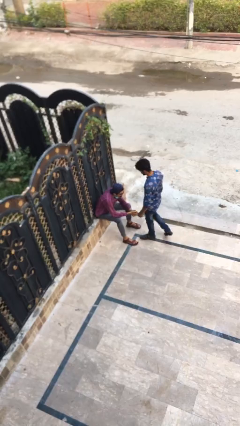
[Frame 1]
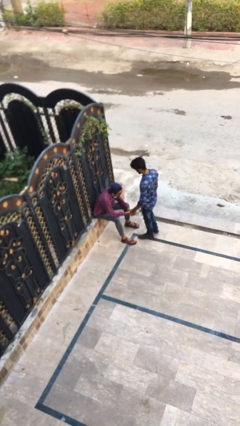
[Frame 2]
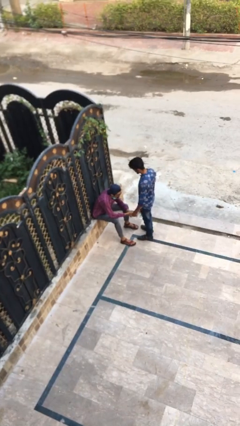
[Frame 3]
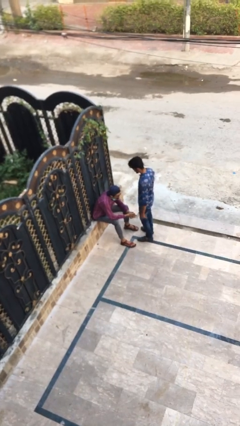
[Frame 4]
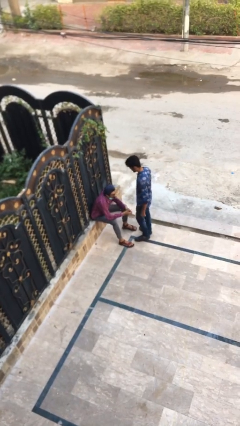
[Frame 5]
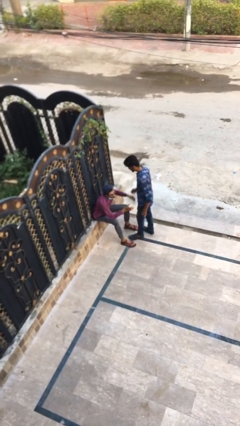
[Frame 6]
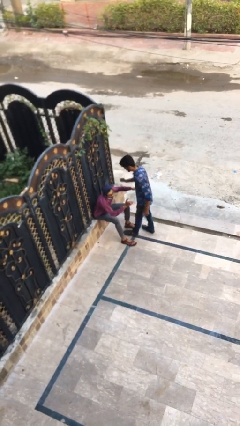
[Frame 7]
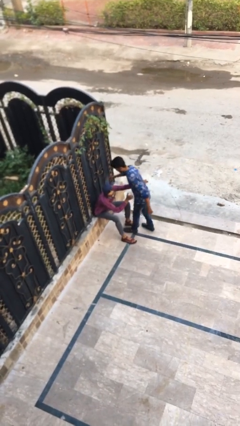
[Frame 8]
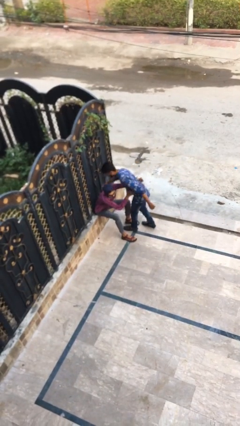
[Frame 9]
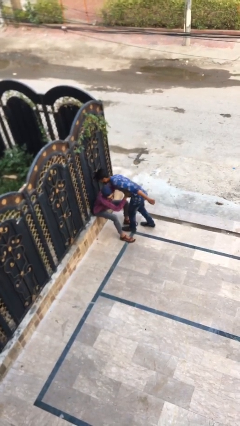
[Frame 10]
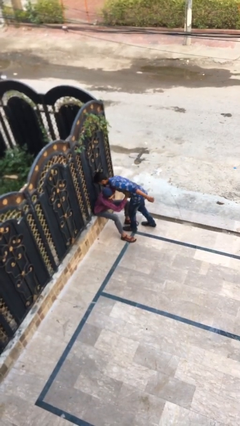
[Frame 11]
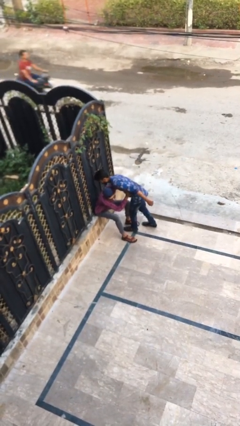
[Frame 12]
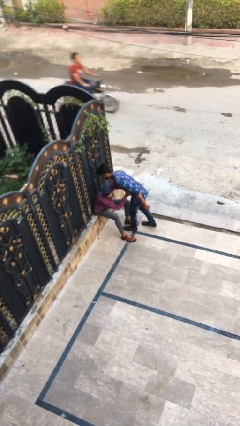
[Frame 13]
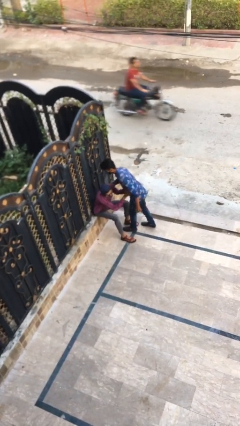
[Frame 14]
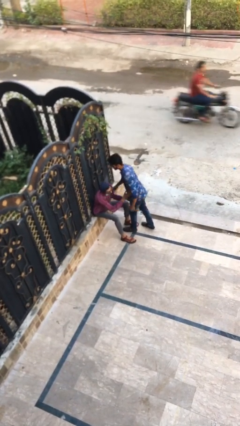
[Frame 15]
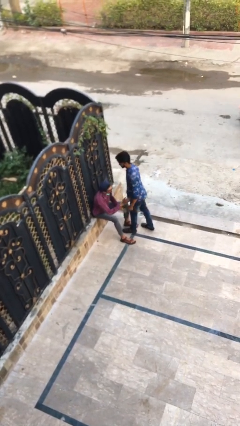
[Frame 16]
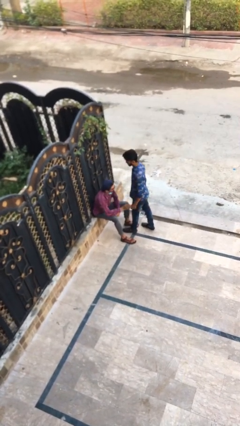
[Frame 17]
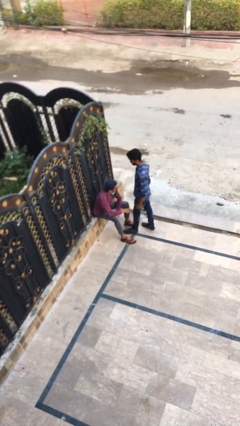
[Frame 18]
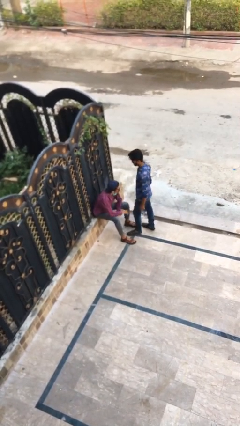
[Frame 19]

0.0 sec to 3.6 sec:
person embraces person

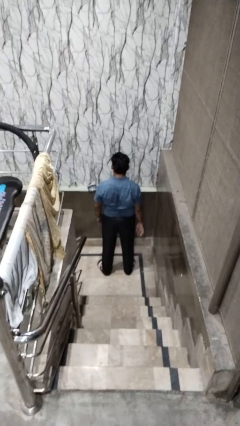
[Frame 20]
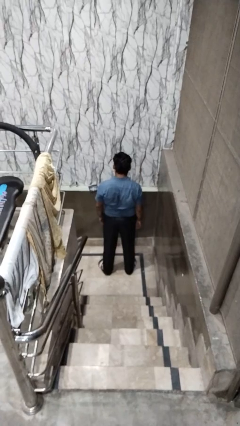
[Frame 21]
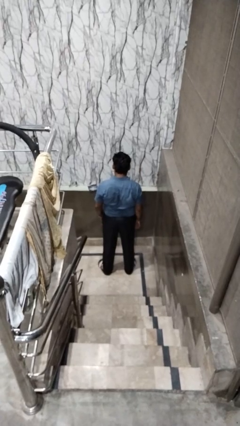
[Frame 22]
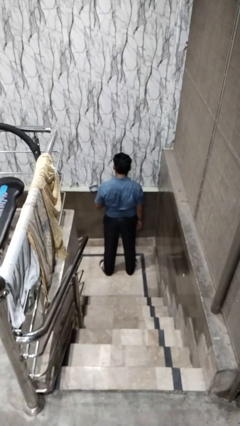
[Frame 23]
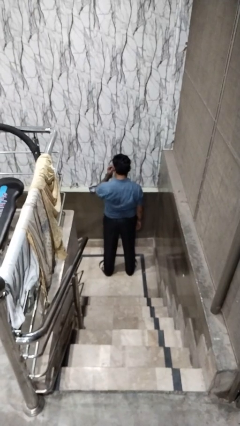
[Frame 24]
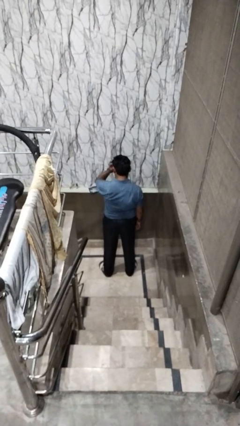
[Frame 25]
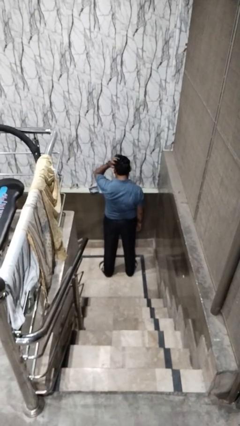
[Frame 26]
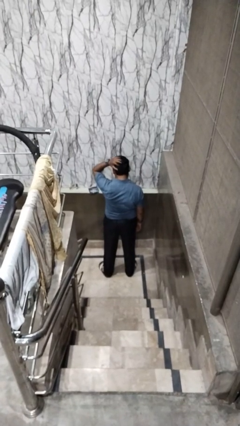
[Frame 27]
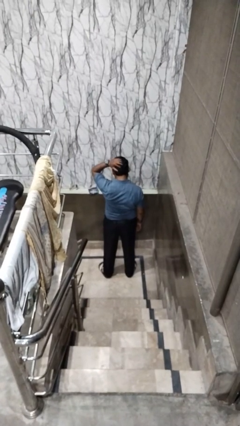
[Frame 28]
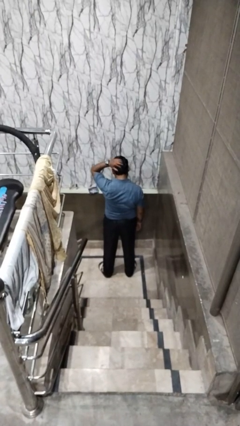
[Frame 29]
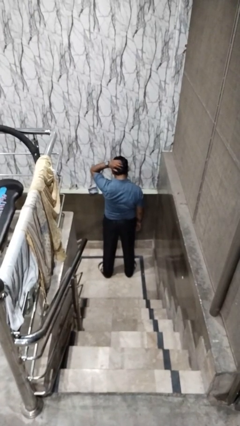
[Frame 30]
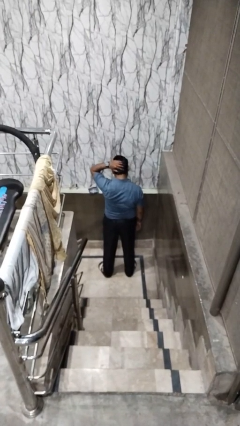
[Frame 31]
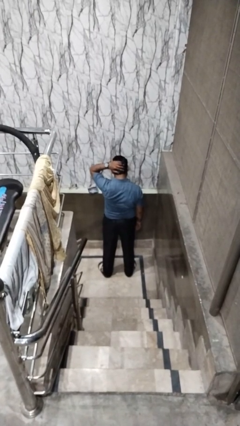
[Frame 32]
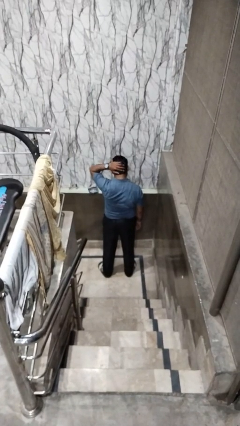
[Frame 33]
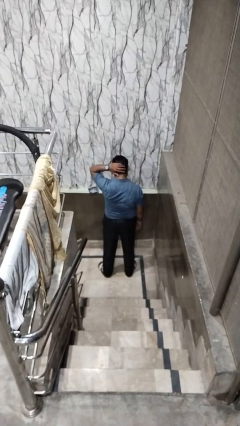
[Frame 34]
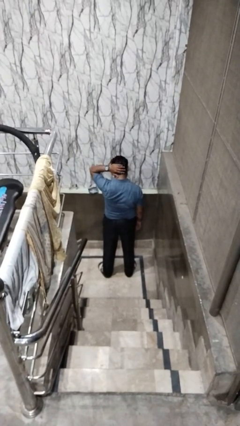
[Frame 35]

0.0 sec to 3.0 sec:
person strokes hair

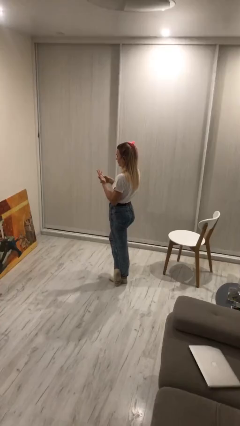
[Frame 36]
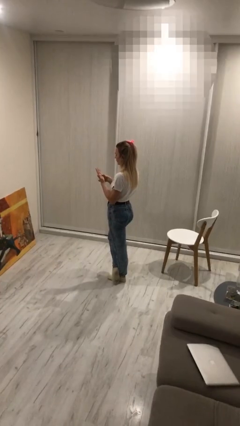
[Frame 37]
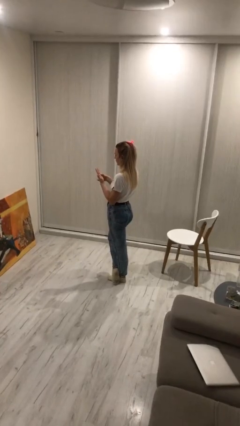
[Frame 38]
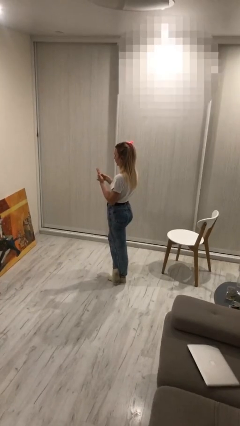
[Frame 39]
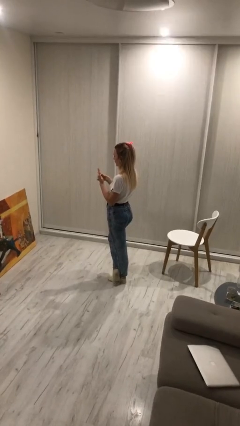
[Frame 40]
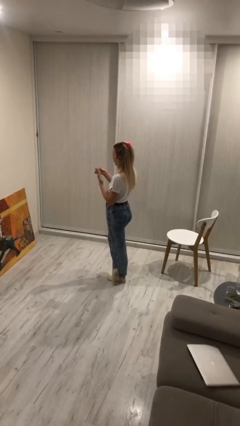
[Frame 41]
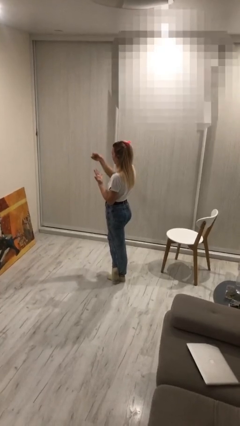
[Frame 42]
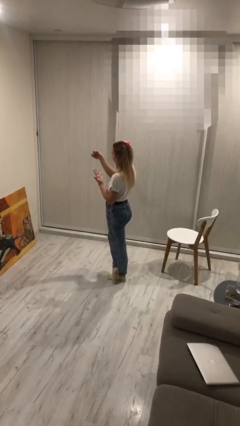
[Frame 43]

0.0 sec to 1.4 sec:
person takes off ring

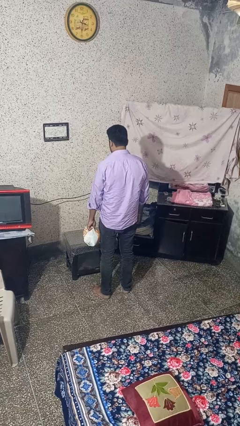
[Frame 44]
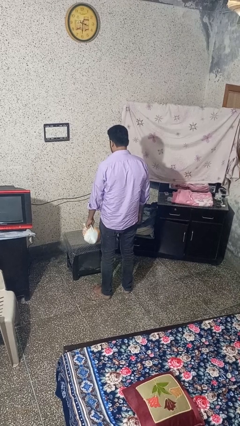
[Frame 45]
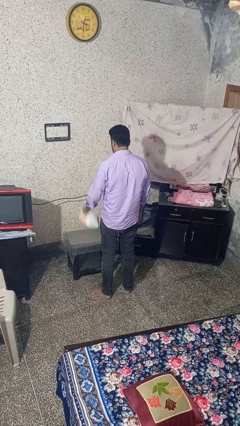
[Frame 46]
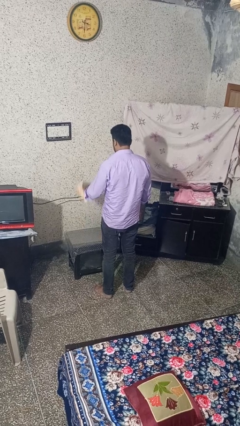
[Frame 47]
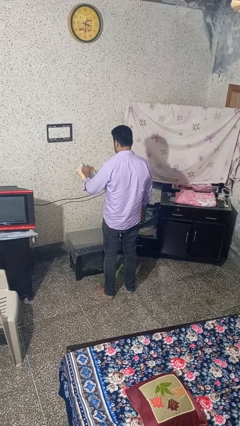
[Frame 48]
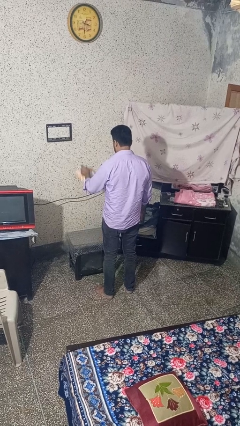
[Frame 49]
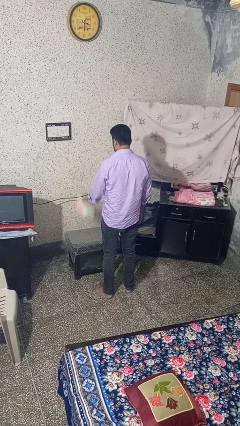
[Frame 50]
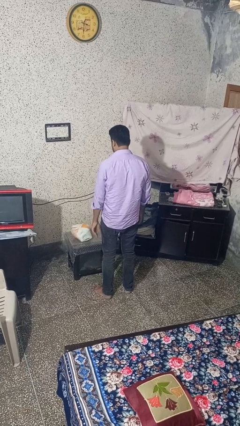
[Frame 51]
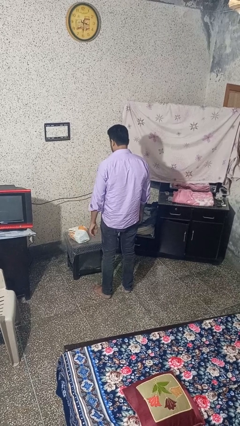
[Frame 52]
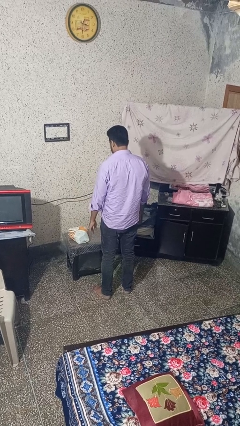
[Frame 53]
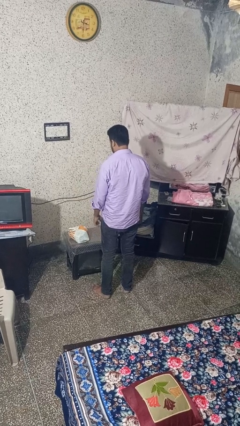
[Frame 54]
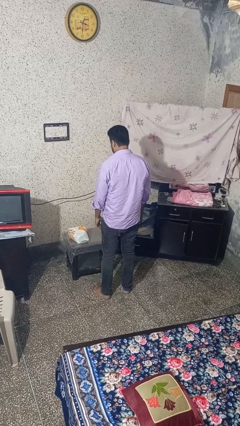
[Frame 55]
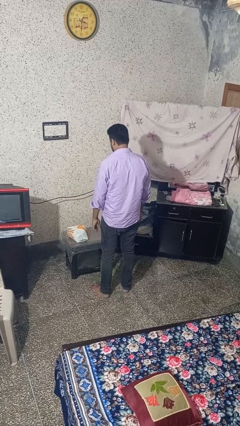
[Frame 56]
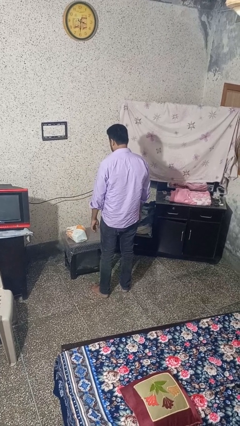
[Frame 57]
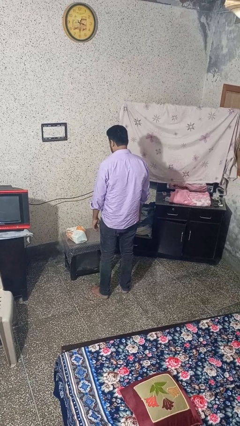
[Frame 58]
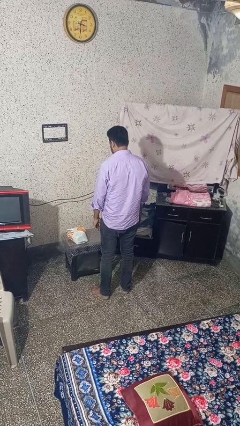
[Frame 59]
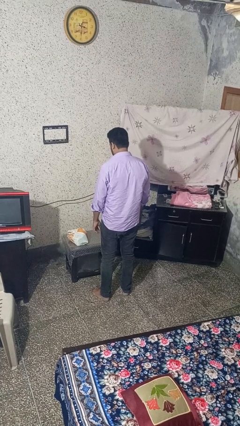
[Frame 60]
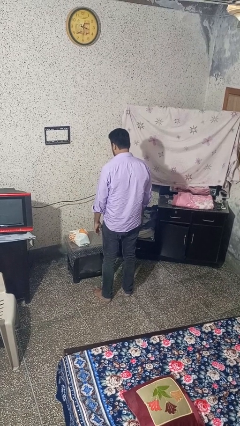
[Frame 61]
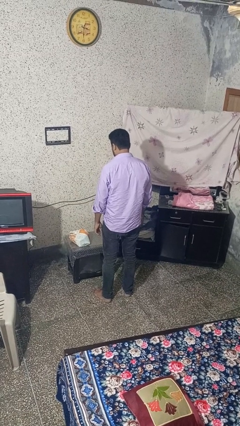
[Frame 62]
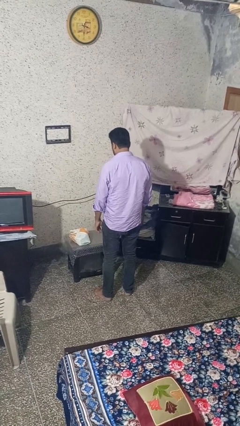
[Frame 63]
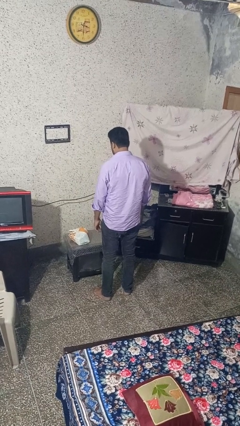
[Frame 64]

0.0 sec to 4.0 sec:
person throws object on table

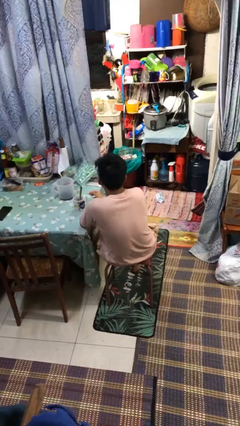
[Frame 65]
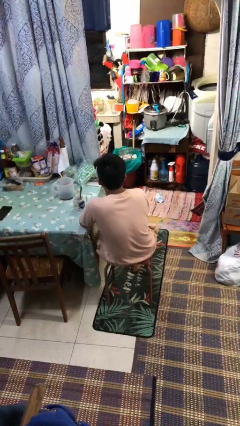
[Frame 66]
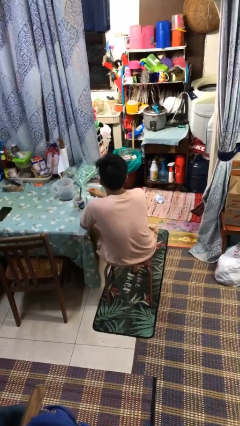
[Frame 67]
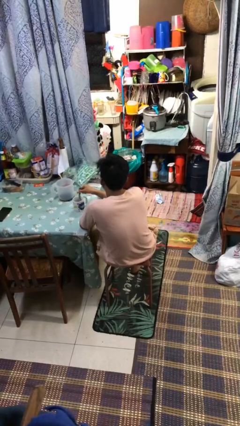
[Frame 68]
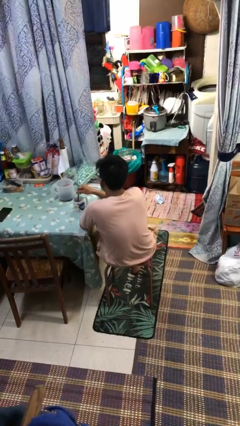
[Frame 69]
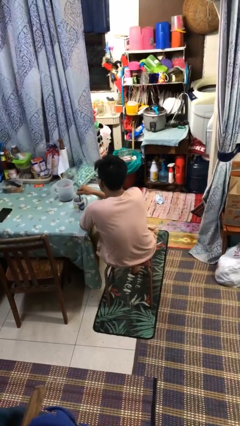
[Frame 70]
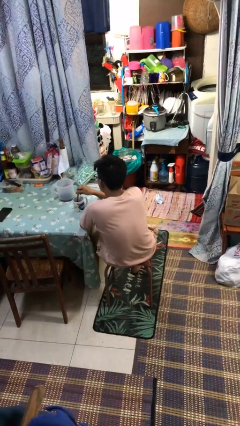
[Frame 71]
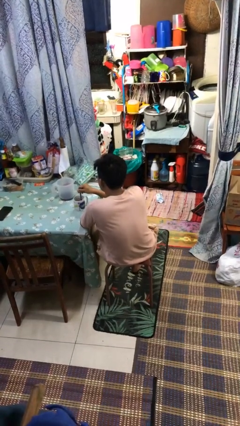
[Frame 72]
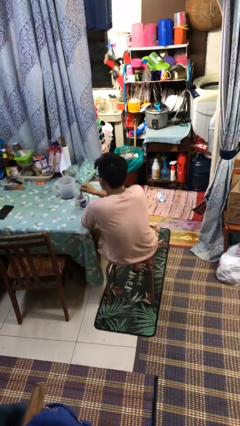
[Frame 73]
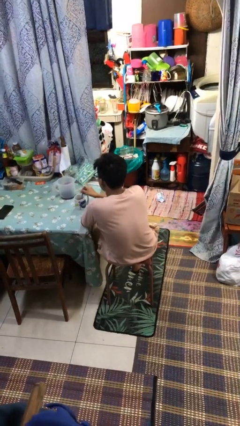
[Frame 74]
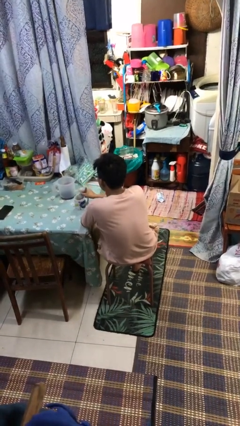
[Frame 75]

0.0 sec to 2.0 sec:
person stirs mug

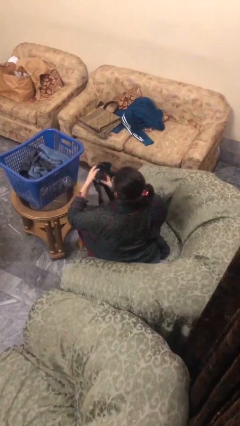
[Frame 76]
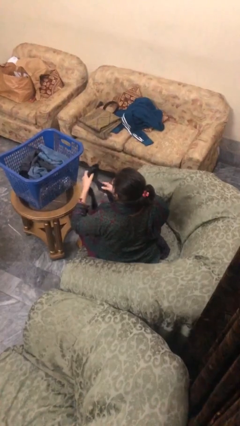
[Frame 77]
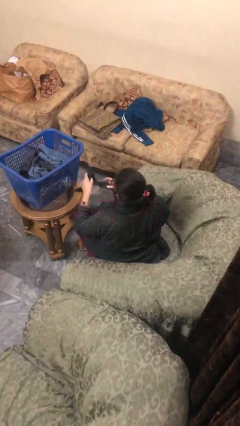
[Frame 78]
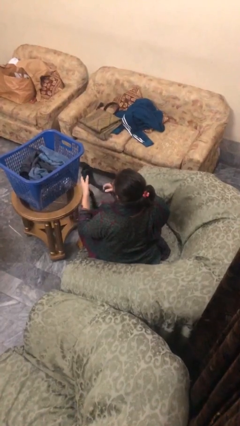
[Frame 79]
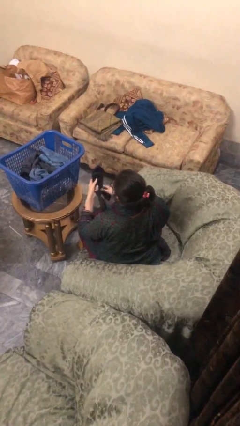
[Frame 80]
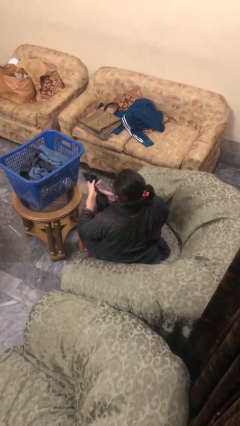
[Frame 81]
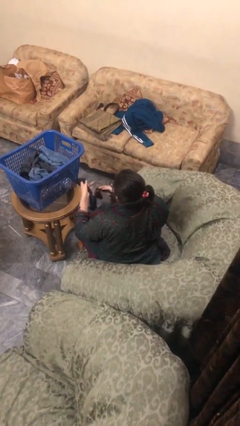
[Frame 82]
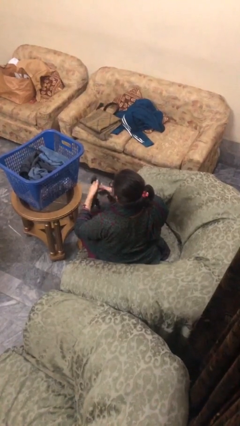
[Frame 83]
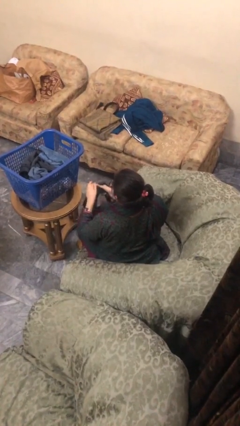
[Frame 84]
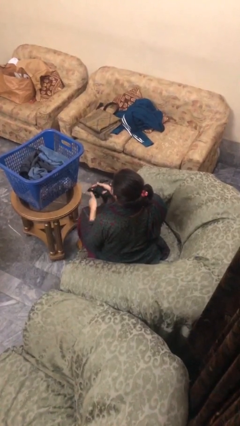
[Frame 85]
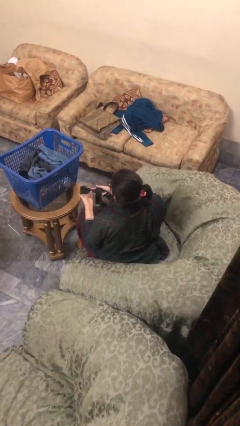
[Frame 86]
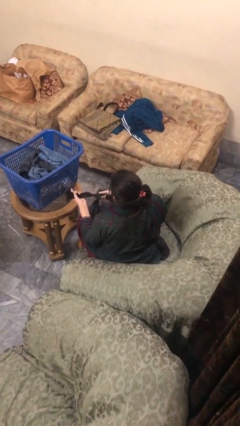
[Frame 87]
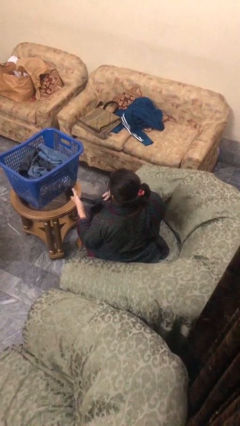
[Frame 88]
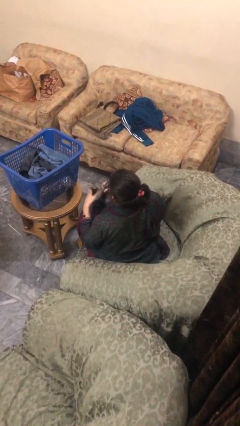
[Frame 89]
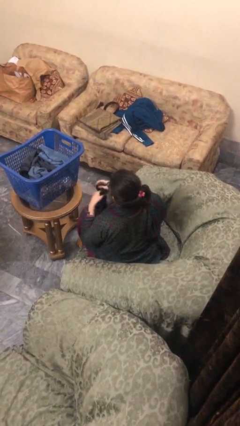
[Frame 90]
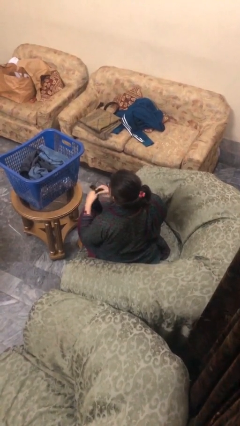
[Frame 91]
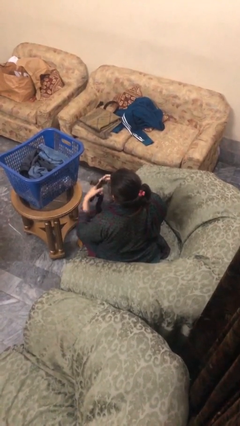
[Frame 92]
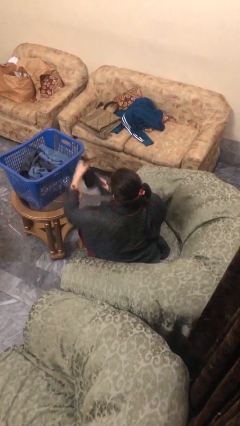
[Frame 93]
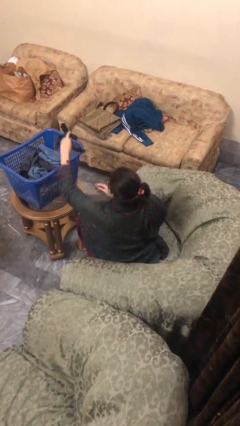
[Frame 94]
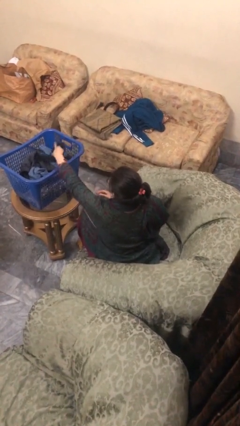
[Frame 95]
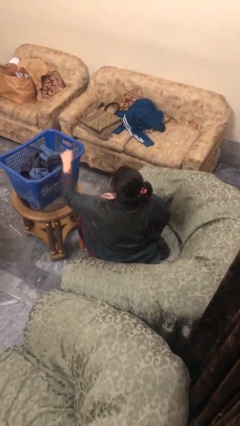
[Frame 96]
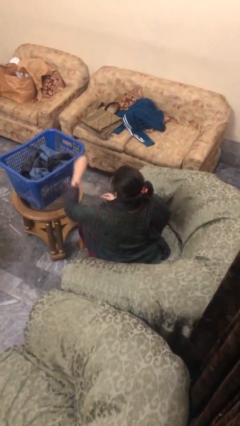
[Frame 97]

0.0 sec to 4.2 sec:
person folds socks
